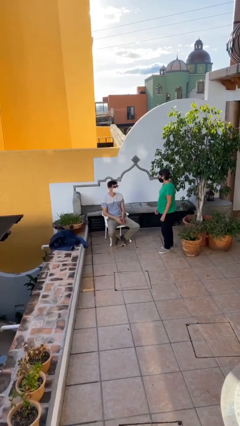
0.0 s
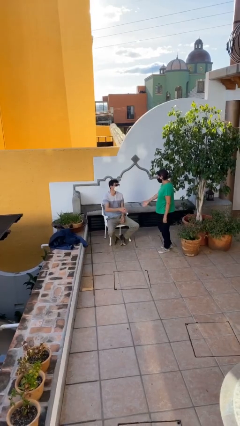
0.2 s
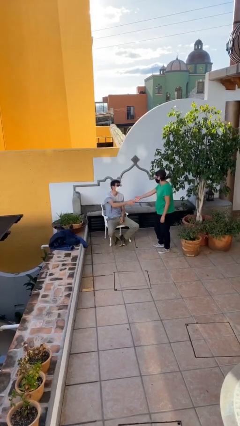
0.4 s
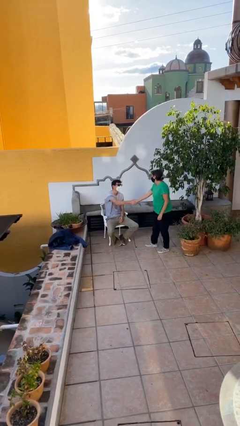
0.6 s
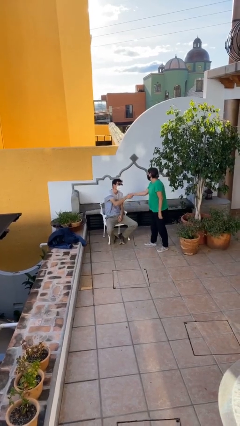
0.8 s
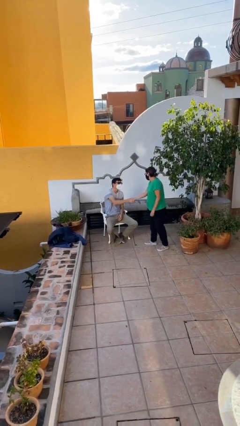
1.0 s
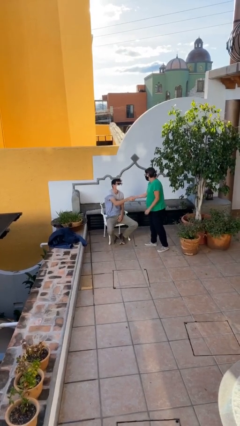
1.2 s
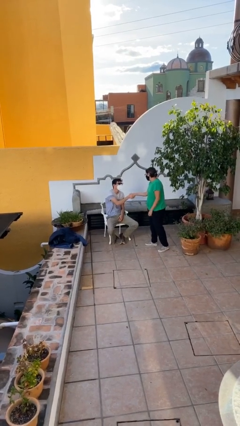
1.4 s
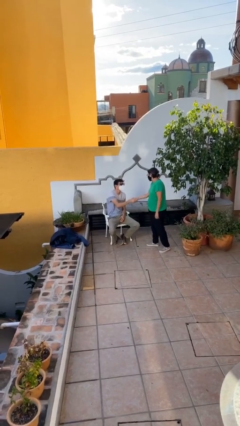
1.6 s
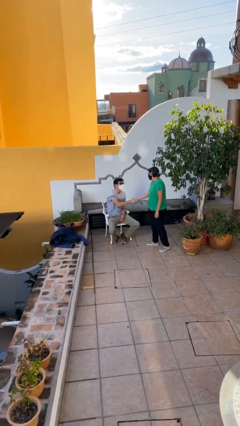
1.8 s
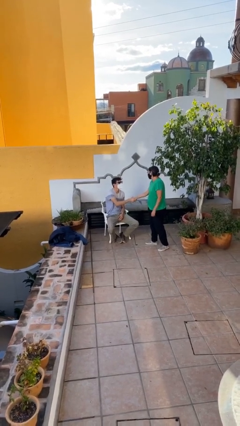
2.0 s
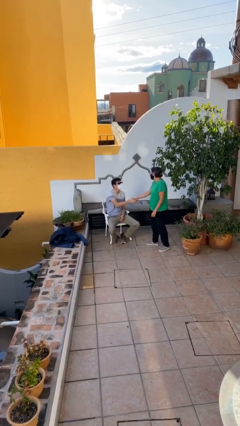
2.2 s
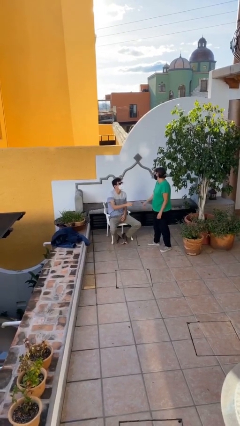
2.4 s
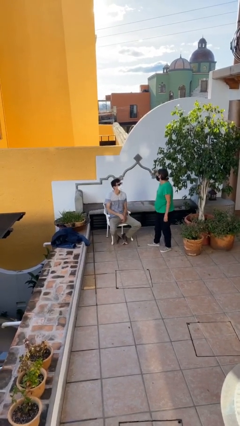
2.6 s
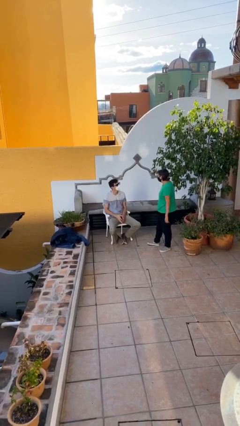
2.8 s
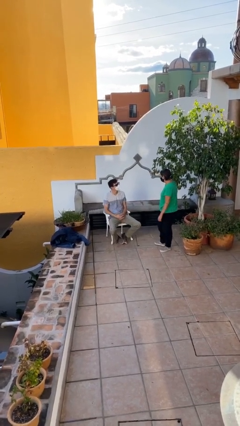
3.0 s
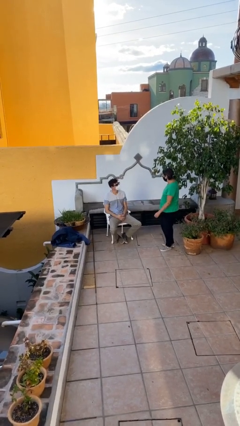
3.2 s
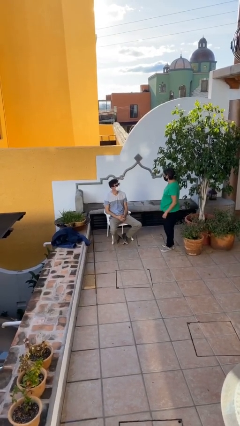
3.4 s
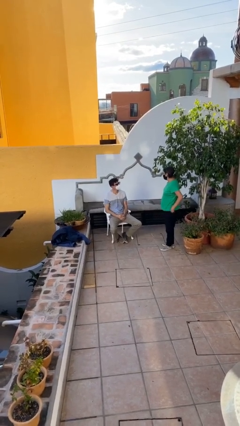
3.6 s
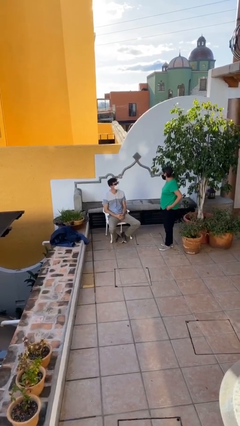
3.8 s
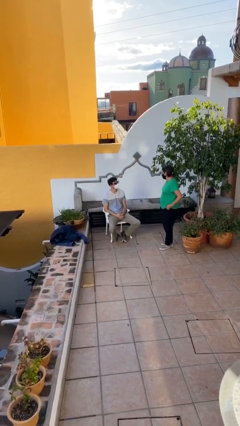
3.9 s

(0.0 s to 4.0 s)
person shakes hand

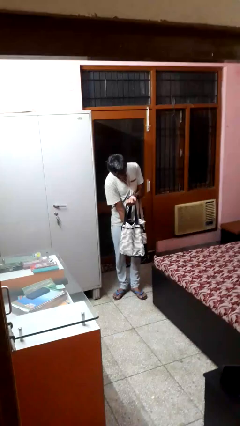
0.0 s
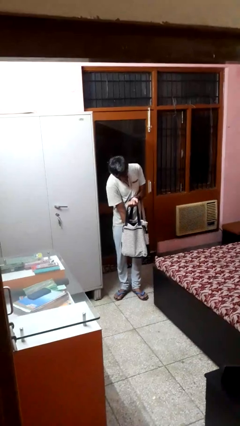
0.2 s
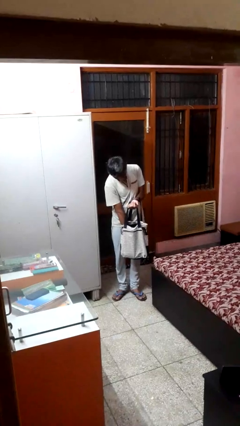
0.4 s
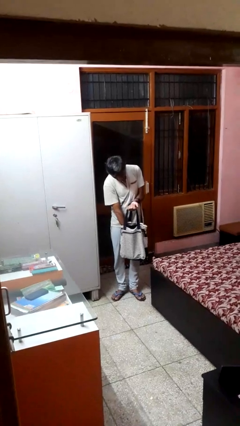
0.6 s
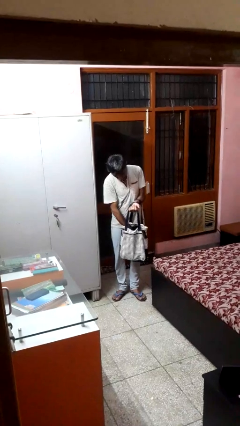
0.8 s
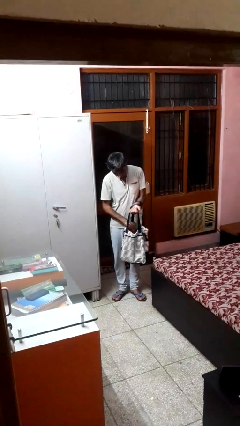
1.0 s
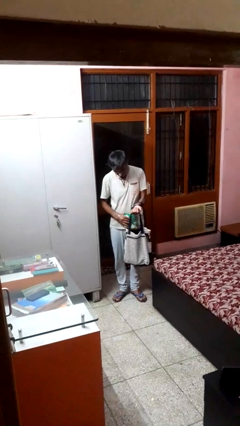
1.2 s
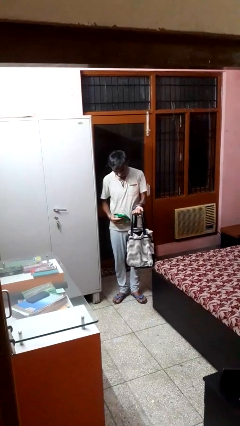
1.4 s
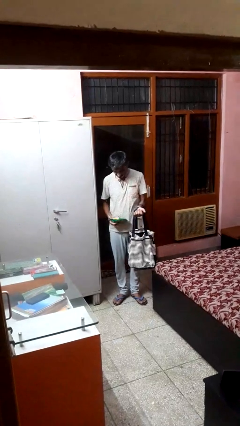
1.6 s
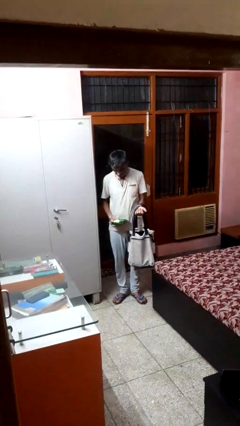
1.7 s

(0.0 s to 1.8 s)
person takes object from bag

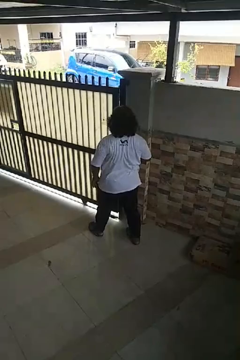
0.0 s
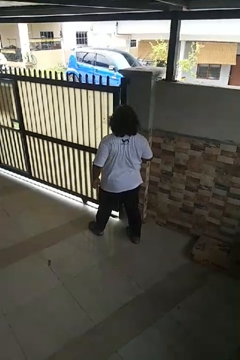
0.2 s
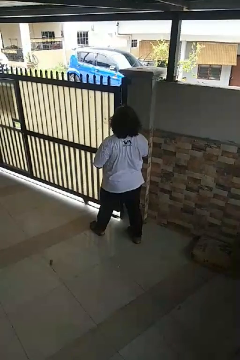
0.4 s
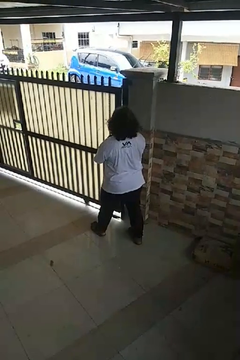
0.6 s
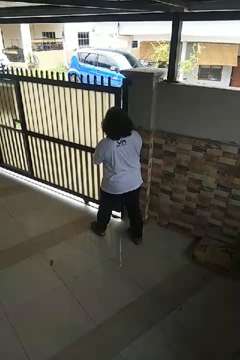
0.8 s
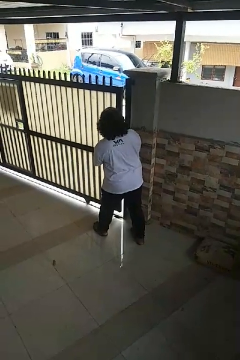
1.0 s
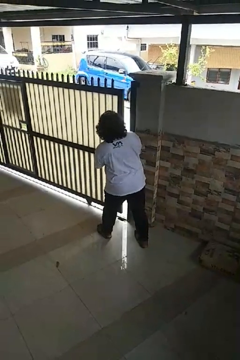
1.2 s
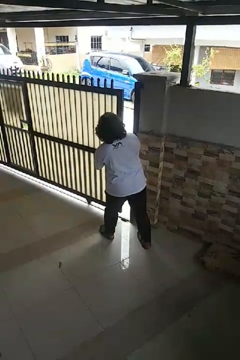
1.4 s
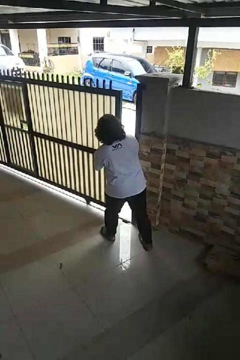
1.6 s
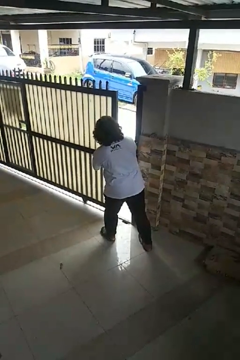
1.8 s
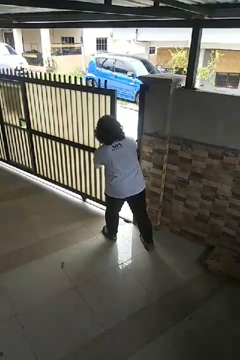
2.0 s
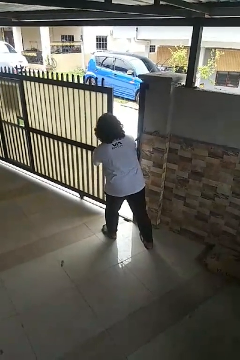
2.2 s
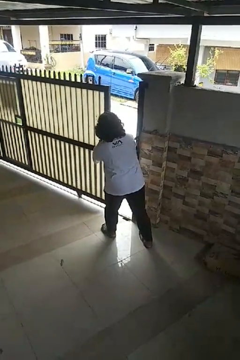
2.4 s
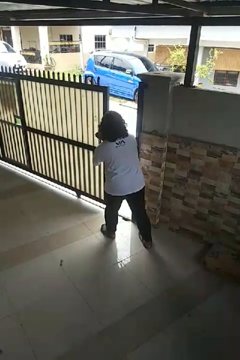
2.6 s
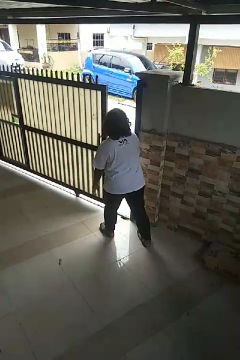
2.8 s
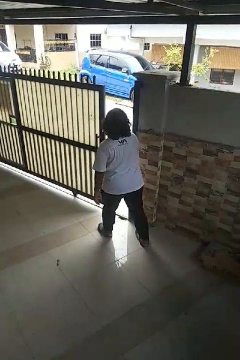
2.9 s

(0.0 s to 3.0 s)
person opens sliding door

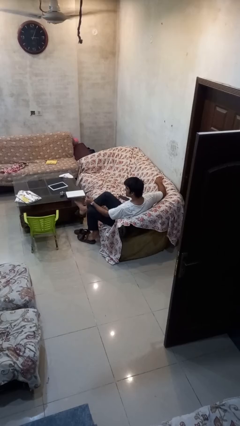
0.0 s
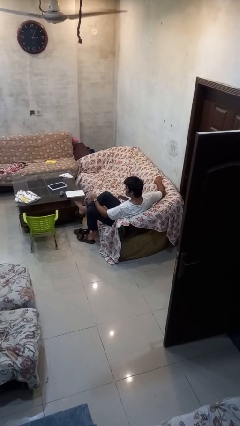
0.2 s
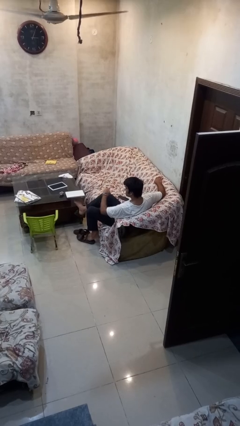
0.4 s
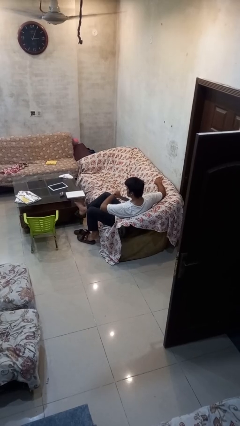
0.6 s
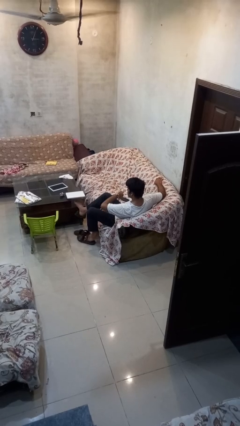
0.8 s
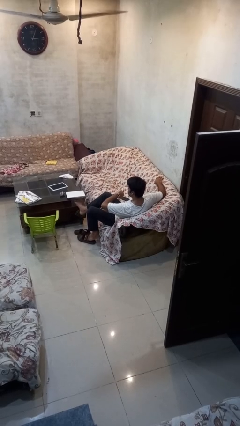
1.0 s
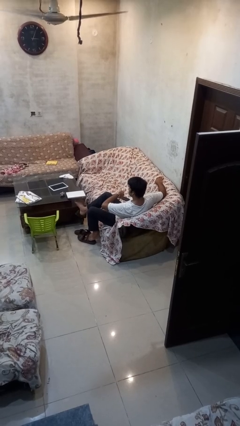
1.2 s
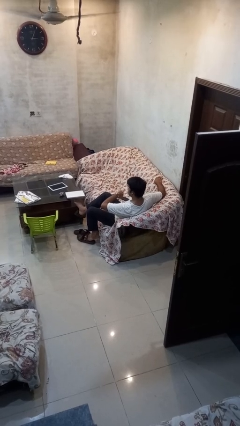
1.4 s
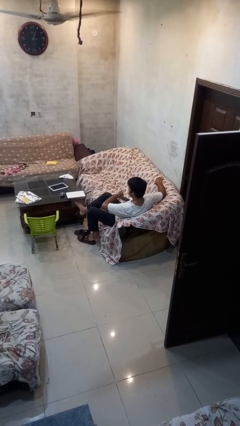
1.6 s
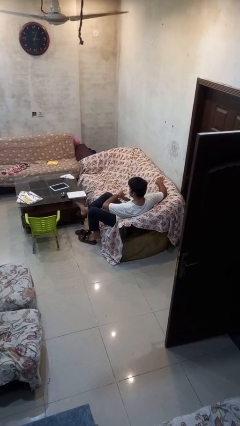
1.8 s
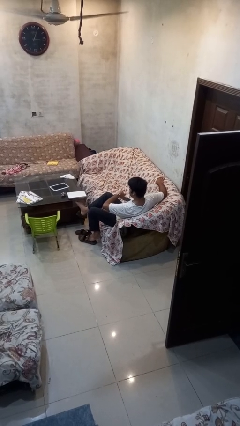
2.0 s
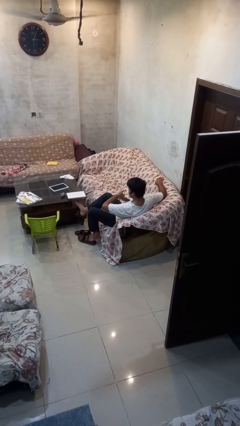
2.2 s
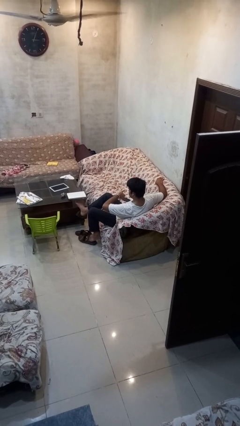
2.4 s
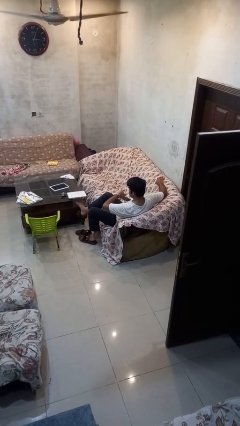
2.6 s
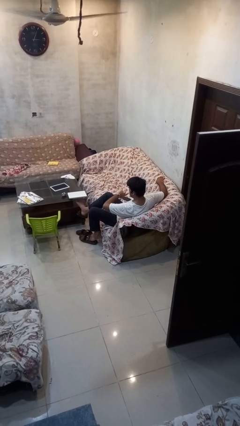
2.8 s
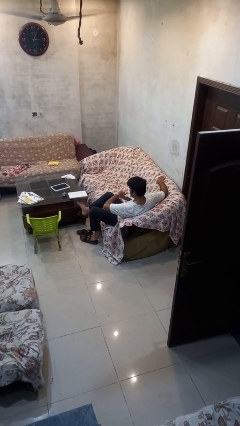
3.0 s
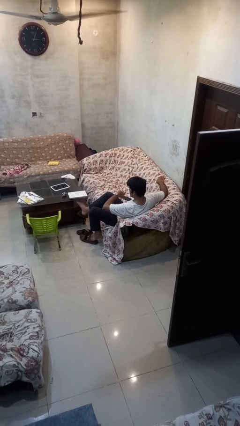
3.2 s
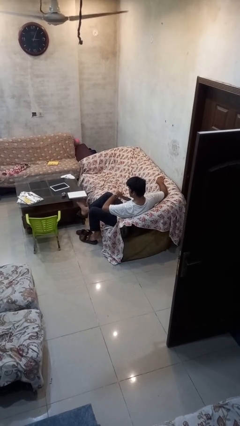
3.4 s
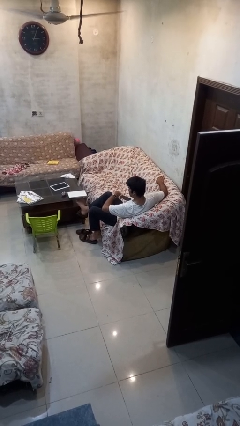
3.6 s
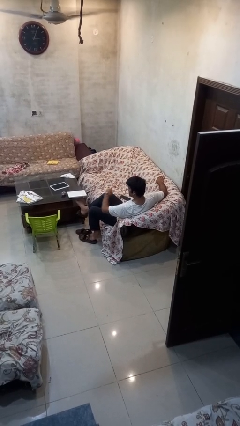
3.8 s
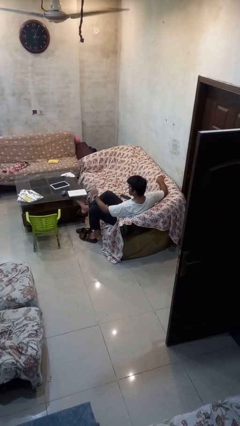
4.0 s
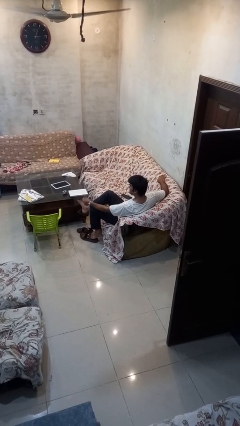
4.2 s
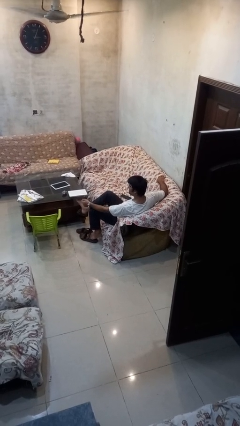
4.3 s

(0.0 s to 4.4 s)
person looks at wristwatch

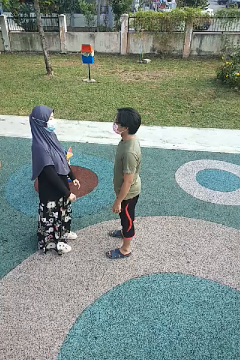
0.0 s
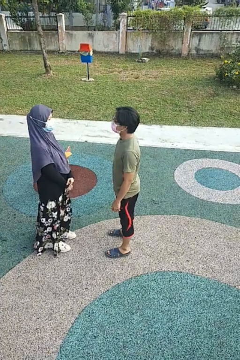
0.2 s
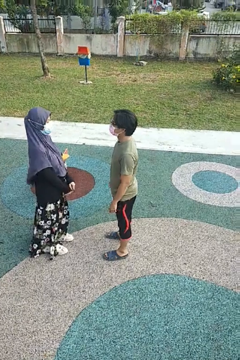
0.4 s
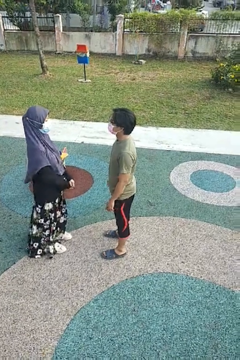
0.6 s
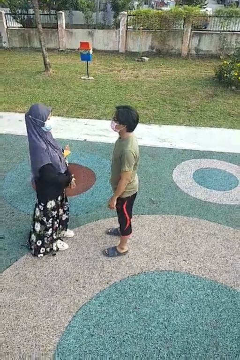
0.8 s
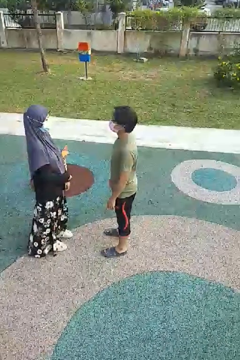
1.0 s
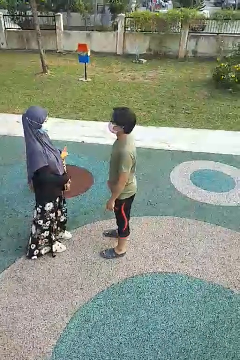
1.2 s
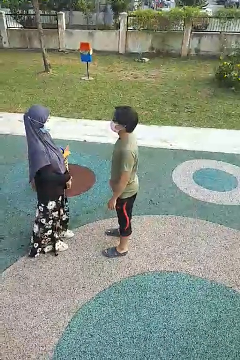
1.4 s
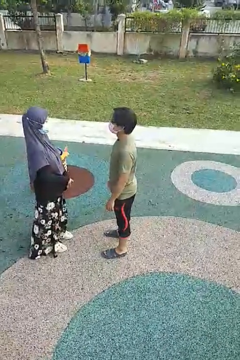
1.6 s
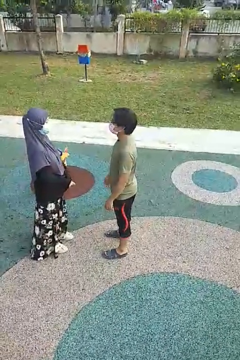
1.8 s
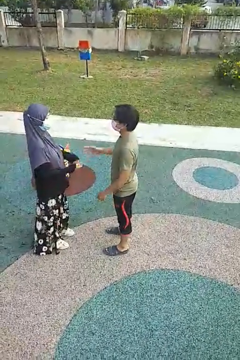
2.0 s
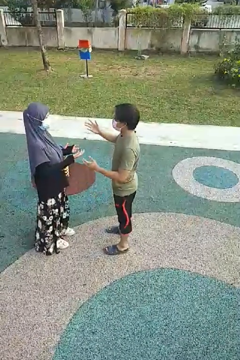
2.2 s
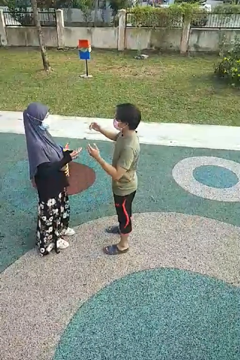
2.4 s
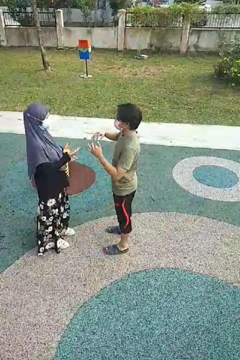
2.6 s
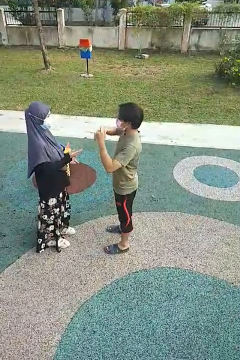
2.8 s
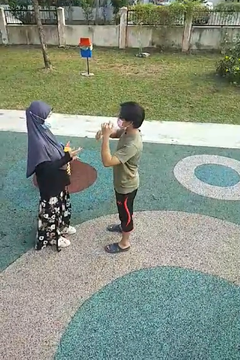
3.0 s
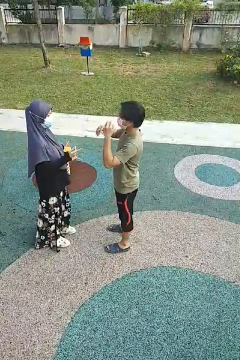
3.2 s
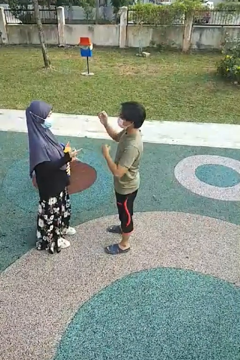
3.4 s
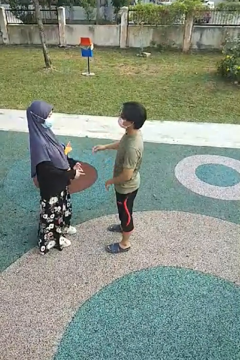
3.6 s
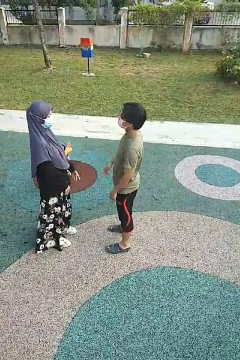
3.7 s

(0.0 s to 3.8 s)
person talks to person

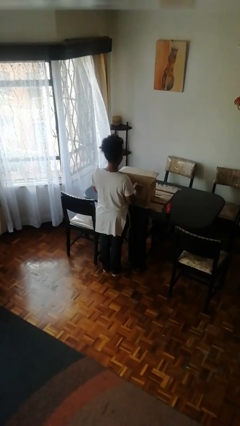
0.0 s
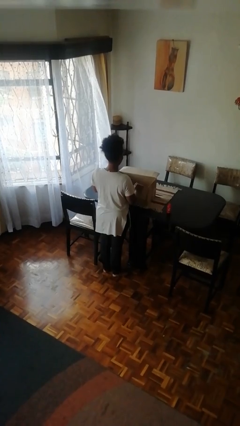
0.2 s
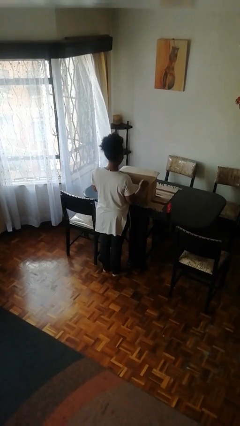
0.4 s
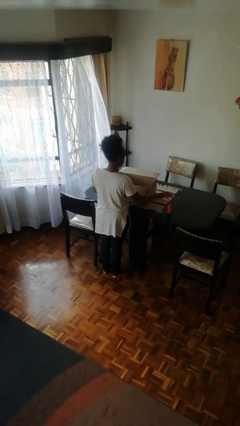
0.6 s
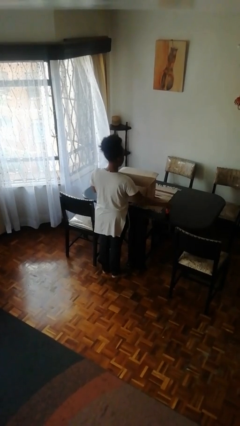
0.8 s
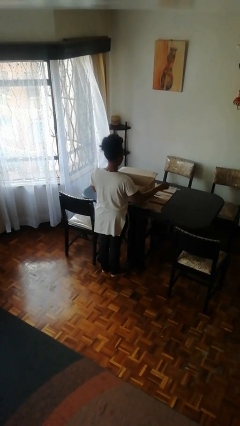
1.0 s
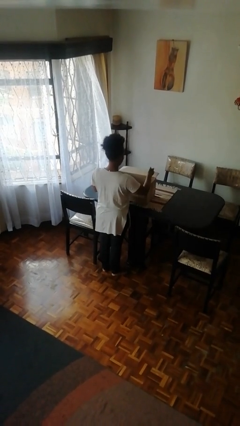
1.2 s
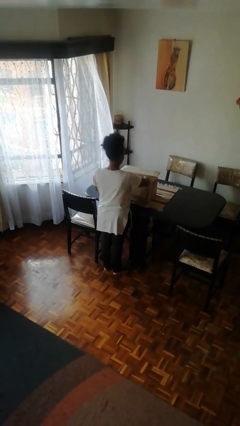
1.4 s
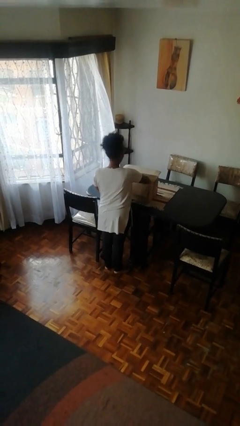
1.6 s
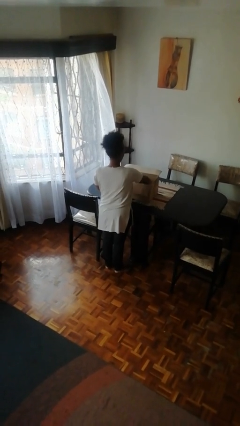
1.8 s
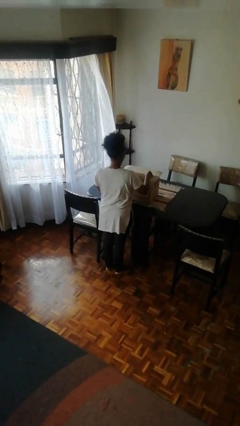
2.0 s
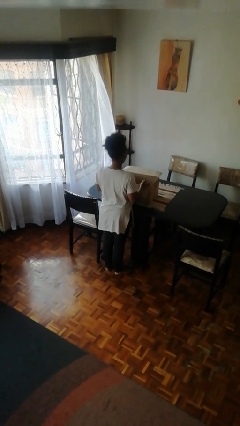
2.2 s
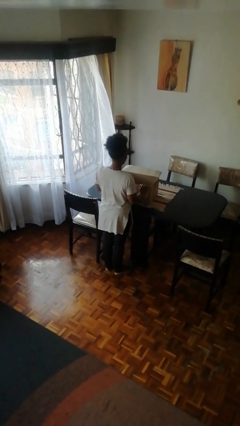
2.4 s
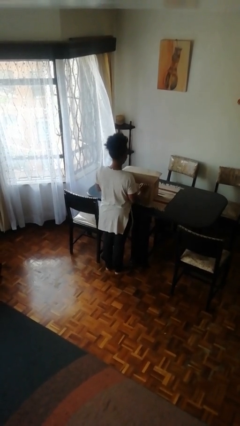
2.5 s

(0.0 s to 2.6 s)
person puts object into box
